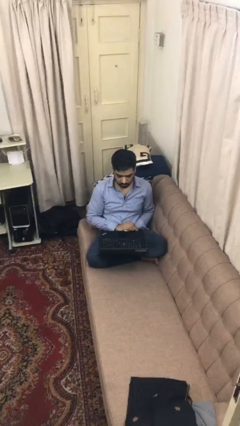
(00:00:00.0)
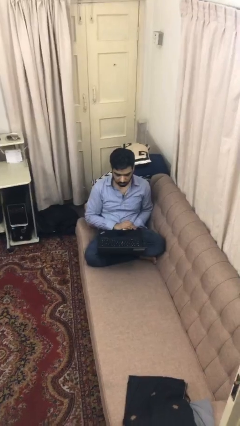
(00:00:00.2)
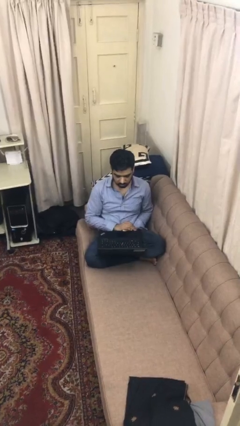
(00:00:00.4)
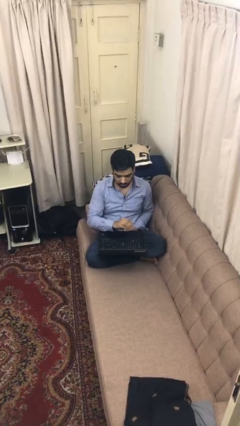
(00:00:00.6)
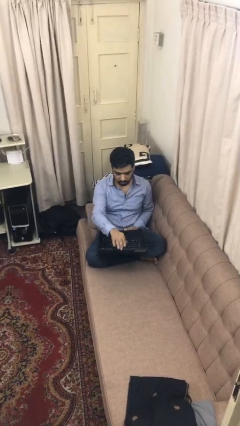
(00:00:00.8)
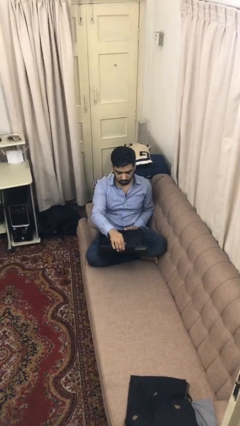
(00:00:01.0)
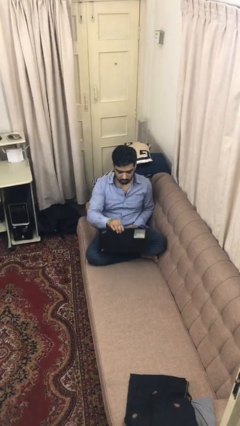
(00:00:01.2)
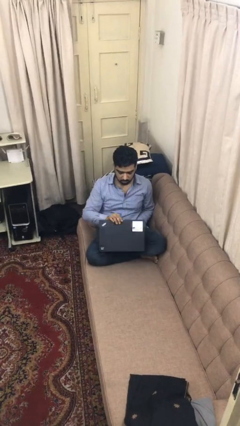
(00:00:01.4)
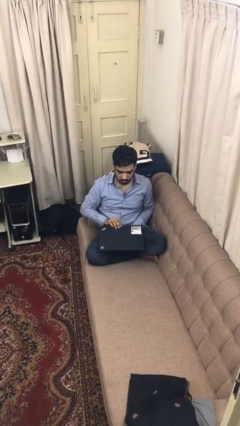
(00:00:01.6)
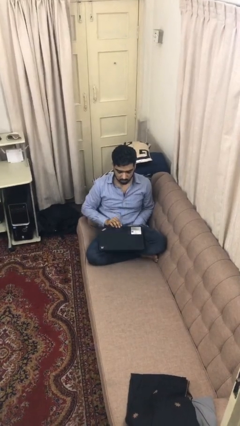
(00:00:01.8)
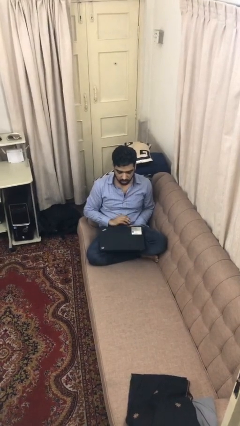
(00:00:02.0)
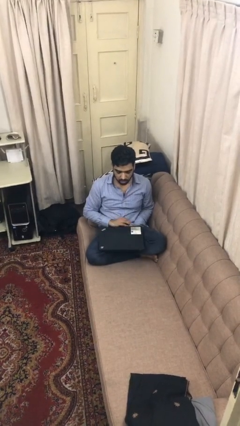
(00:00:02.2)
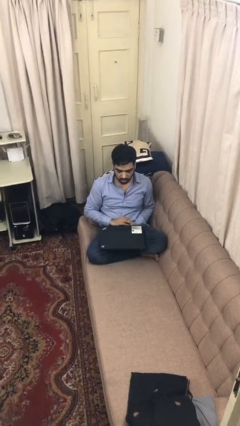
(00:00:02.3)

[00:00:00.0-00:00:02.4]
person closes laptop

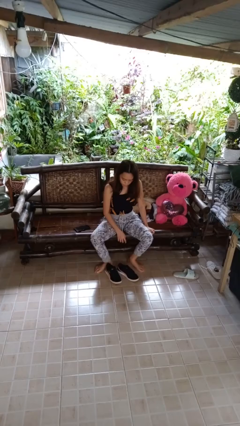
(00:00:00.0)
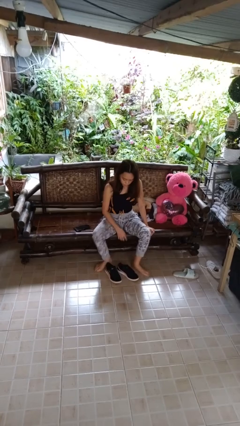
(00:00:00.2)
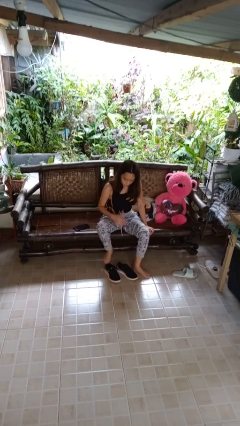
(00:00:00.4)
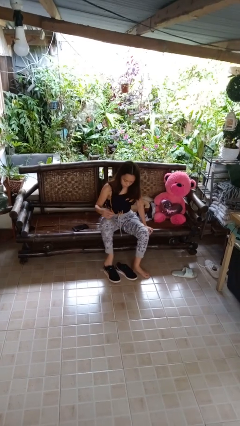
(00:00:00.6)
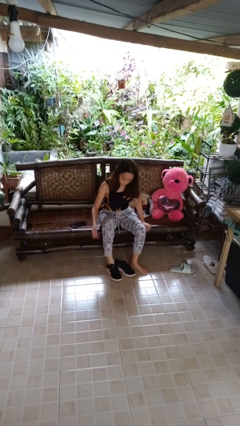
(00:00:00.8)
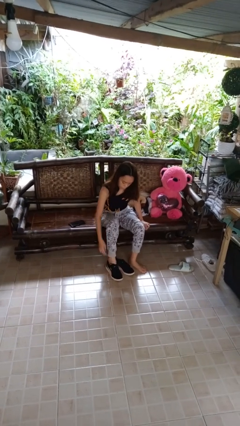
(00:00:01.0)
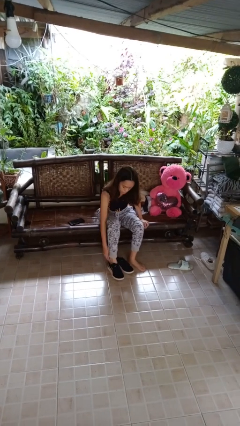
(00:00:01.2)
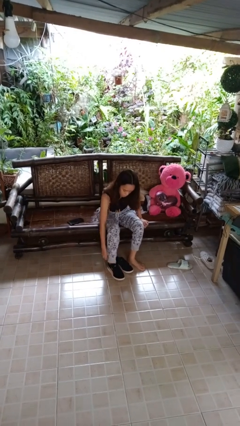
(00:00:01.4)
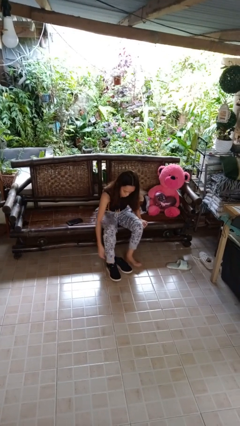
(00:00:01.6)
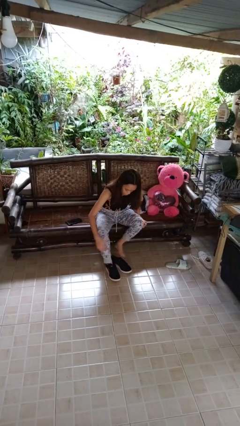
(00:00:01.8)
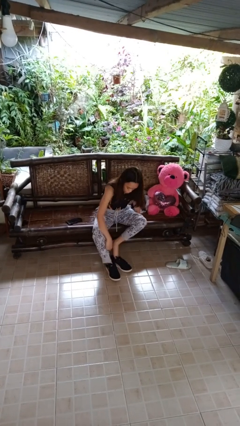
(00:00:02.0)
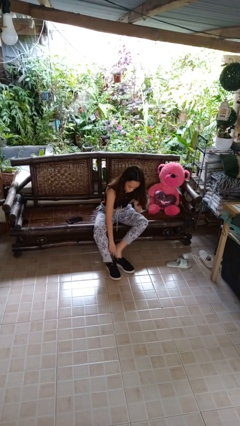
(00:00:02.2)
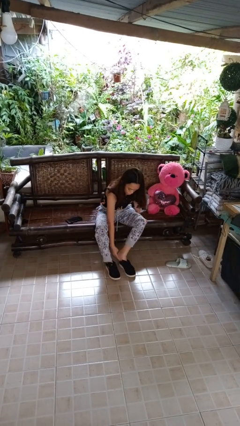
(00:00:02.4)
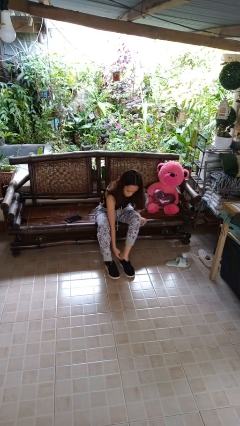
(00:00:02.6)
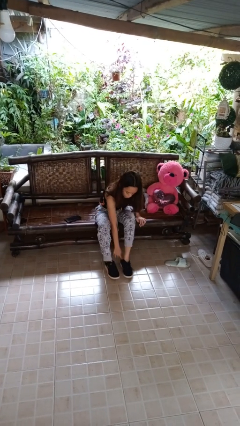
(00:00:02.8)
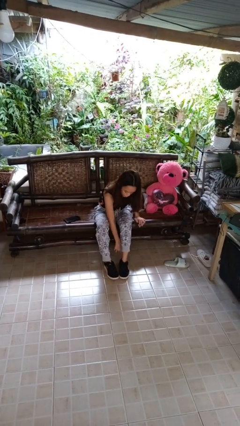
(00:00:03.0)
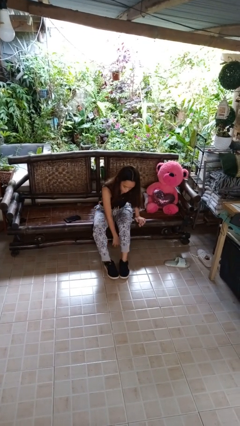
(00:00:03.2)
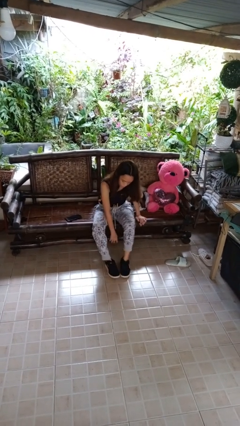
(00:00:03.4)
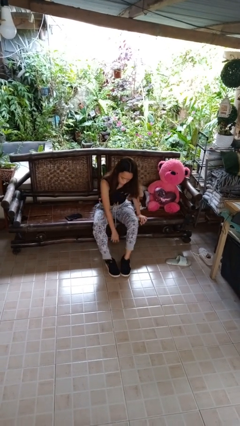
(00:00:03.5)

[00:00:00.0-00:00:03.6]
person puts on shoes

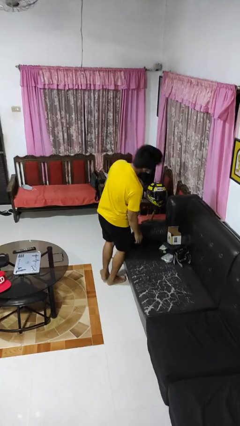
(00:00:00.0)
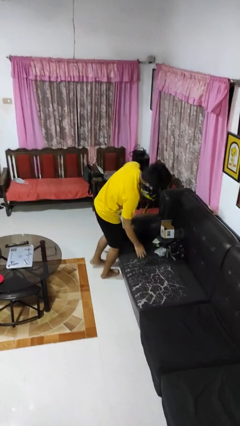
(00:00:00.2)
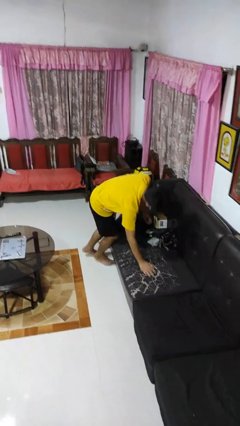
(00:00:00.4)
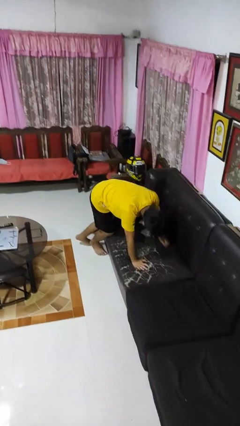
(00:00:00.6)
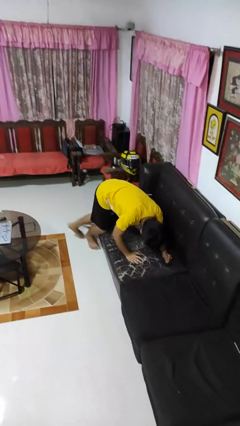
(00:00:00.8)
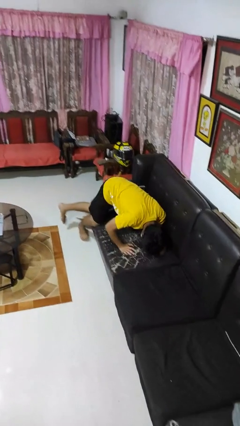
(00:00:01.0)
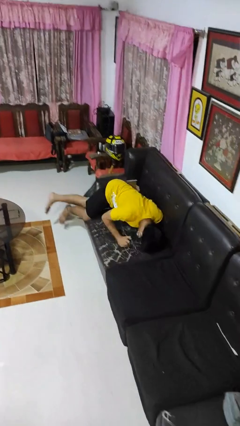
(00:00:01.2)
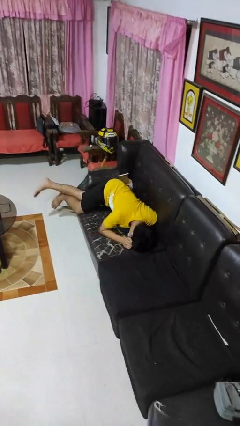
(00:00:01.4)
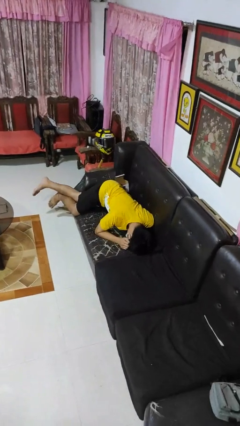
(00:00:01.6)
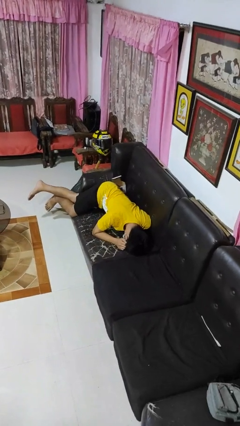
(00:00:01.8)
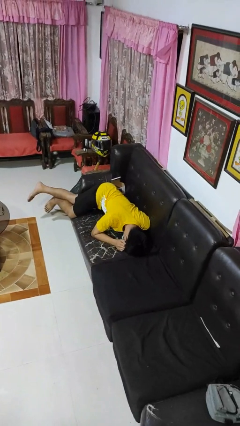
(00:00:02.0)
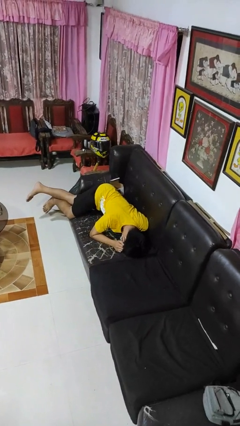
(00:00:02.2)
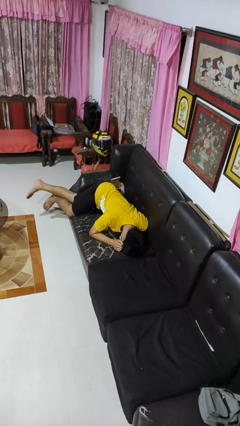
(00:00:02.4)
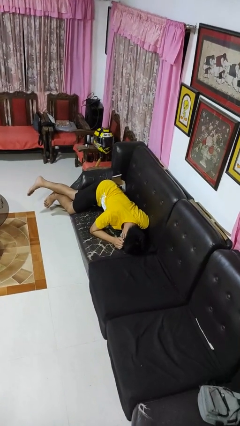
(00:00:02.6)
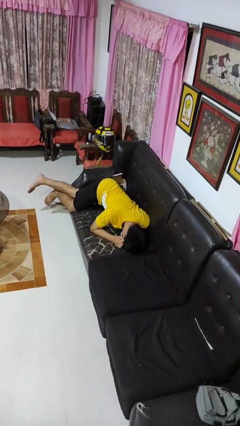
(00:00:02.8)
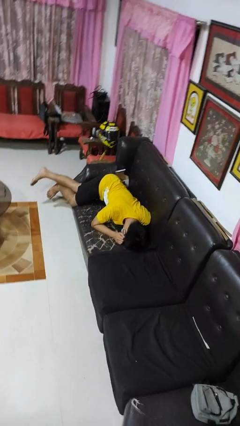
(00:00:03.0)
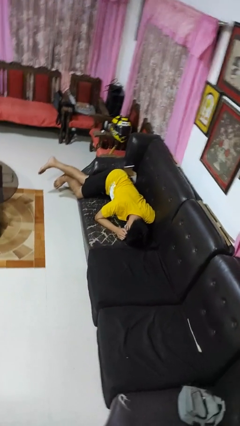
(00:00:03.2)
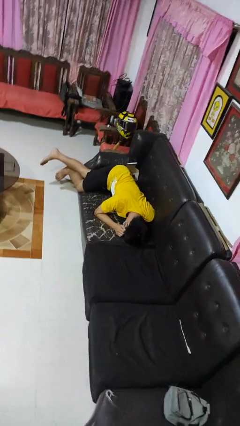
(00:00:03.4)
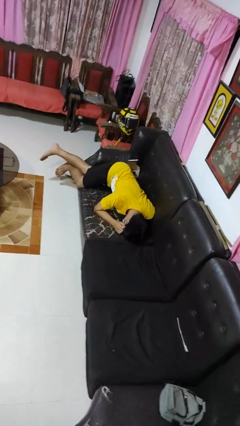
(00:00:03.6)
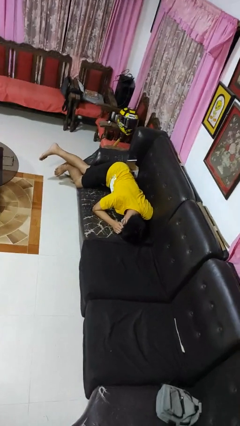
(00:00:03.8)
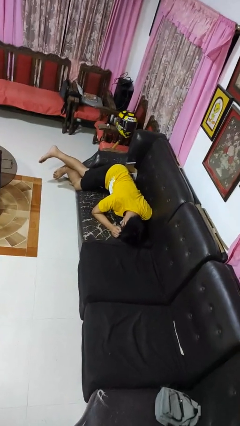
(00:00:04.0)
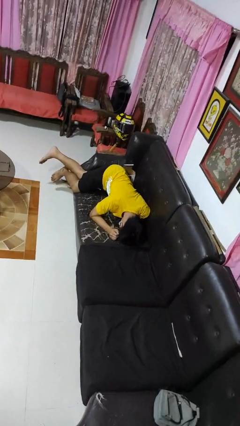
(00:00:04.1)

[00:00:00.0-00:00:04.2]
person lies down on couch

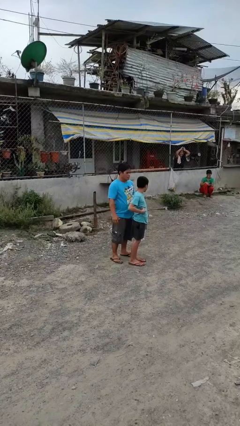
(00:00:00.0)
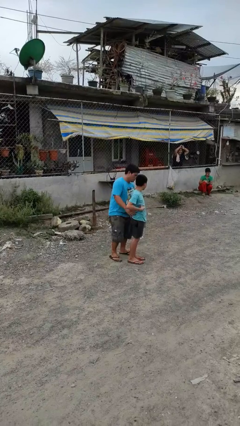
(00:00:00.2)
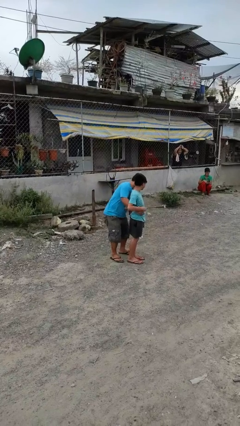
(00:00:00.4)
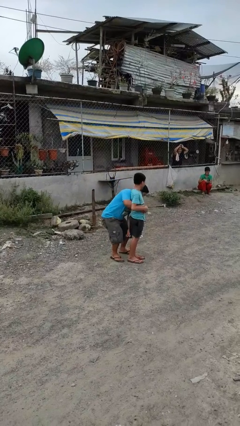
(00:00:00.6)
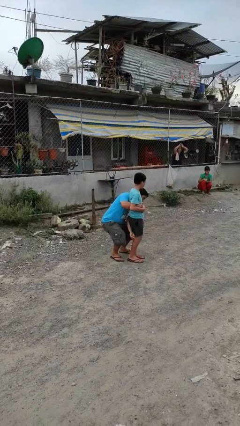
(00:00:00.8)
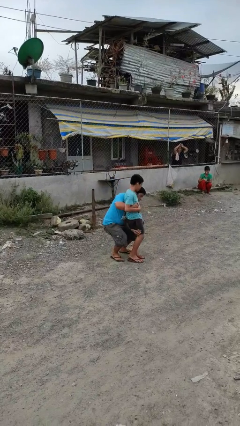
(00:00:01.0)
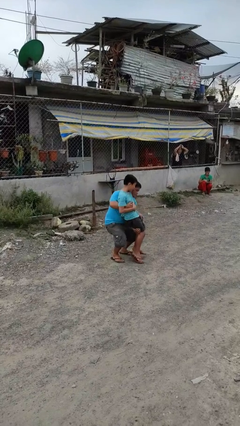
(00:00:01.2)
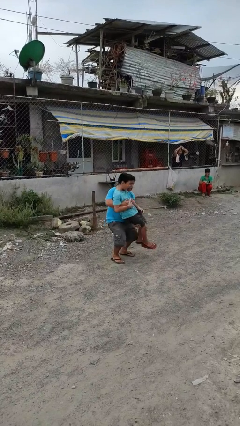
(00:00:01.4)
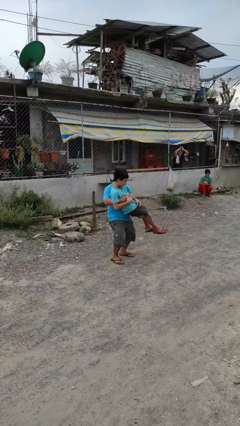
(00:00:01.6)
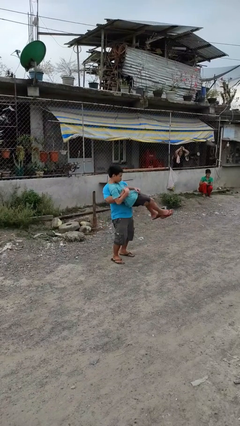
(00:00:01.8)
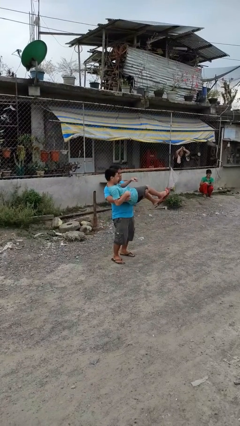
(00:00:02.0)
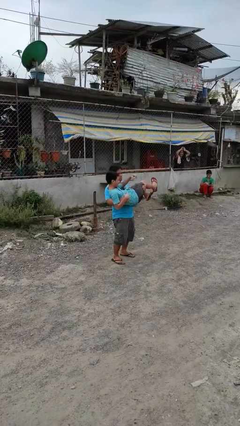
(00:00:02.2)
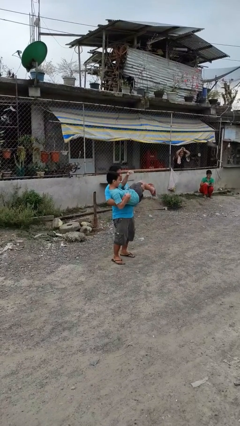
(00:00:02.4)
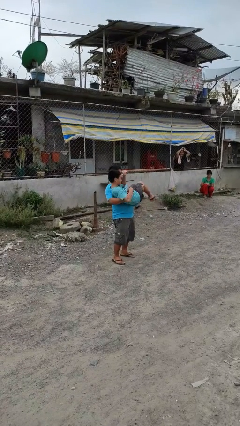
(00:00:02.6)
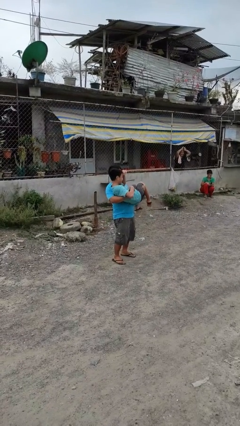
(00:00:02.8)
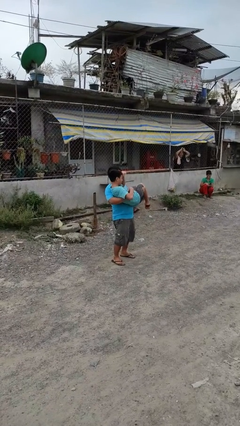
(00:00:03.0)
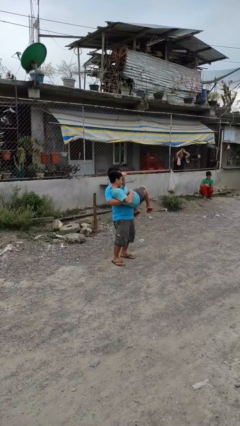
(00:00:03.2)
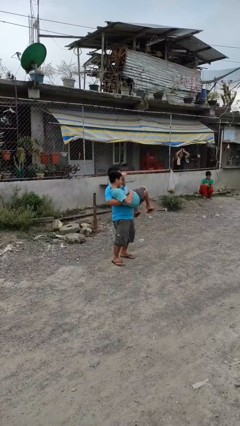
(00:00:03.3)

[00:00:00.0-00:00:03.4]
person picks up person

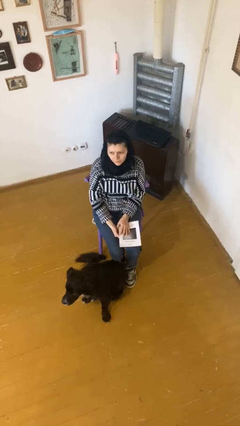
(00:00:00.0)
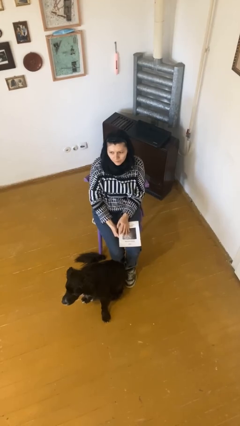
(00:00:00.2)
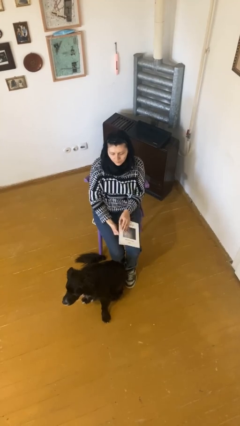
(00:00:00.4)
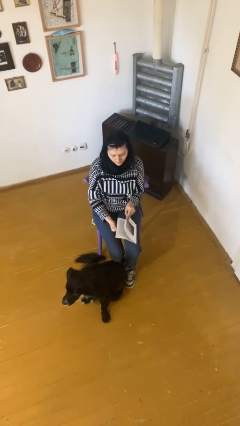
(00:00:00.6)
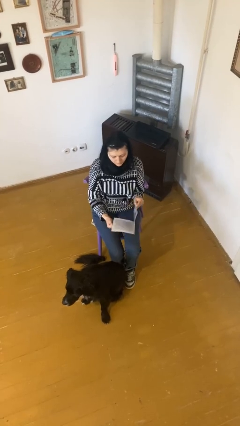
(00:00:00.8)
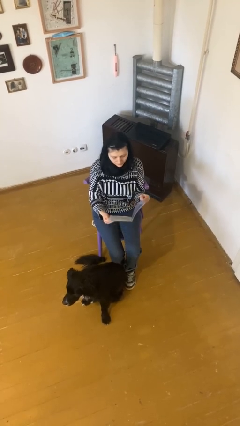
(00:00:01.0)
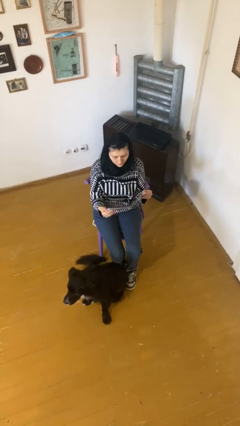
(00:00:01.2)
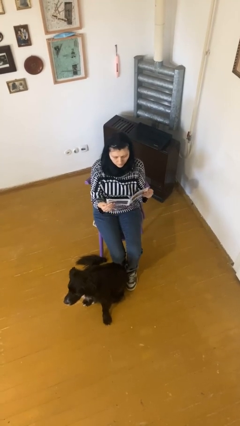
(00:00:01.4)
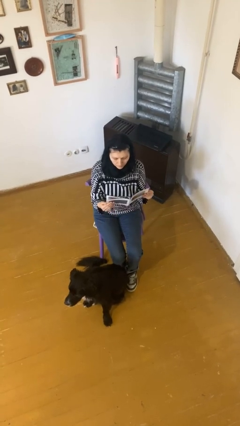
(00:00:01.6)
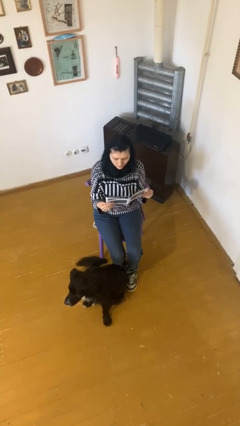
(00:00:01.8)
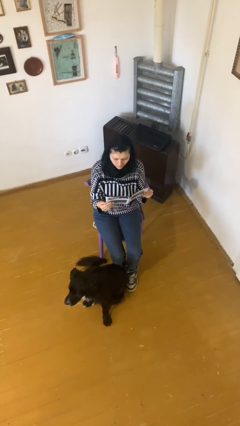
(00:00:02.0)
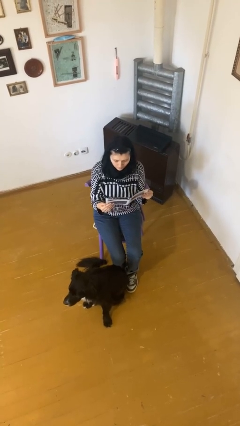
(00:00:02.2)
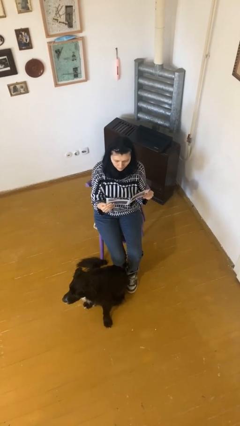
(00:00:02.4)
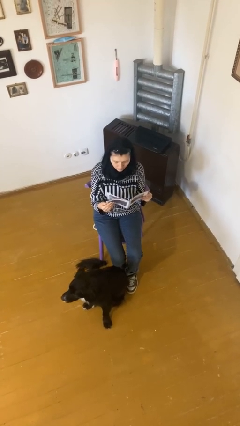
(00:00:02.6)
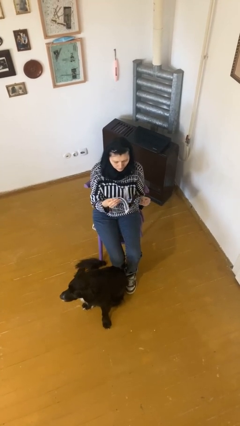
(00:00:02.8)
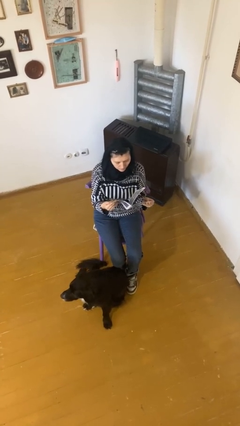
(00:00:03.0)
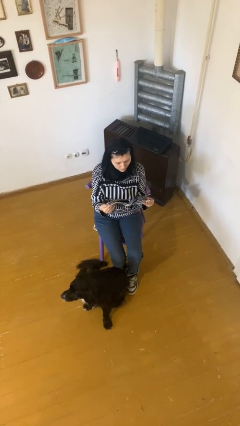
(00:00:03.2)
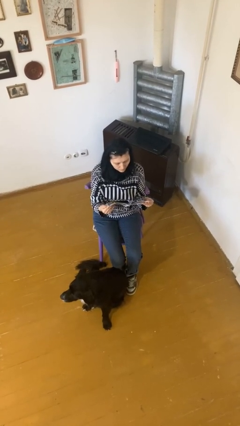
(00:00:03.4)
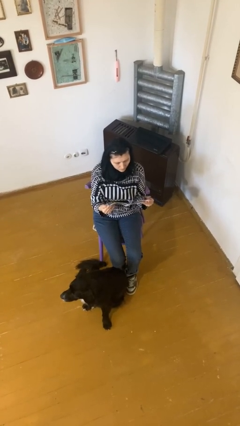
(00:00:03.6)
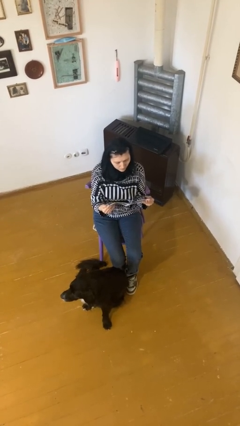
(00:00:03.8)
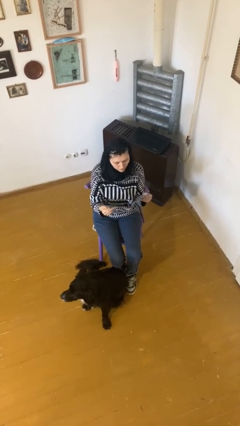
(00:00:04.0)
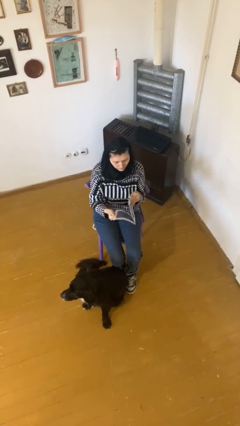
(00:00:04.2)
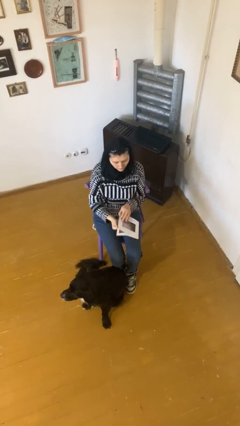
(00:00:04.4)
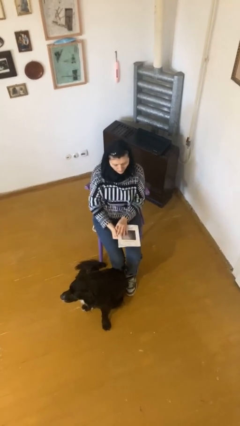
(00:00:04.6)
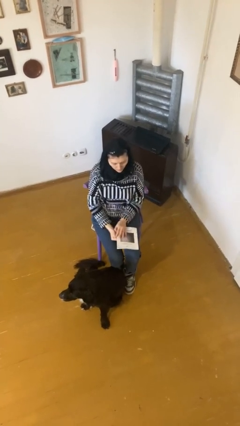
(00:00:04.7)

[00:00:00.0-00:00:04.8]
person reads document
